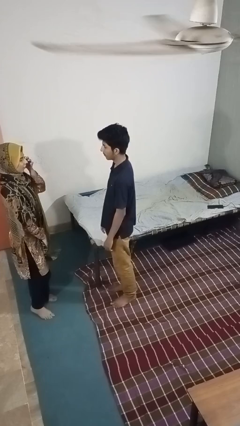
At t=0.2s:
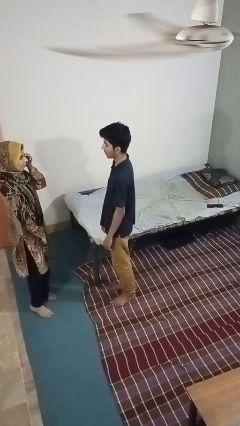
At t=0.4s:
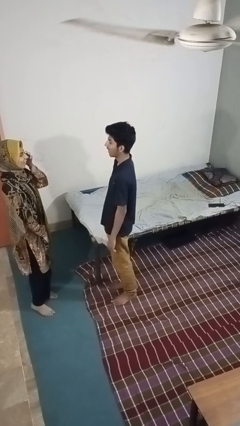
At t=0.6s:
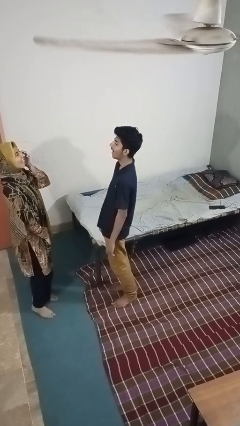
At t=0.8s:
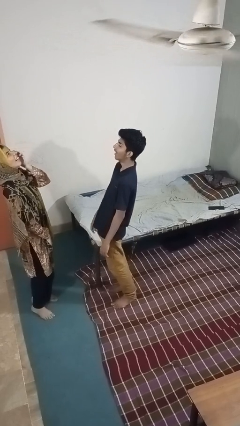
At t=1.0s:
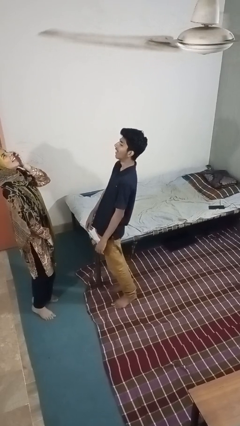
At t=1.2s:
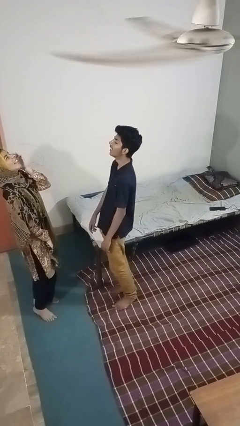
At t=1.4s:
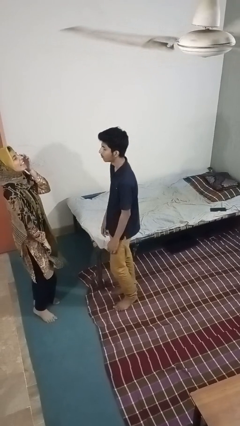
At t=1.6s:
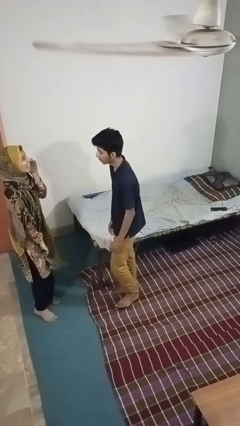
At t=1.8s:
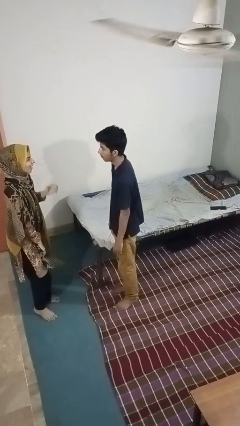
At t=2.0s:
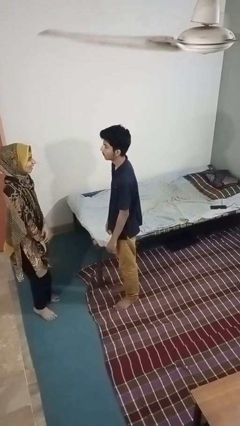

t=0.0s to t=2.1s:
person laughs with person

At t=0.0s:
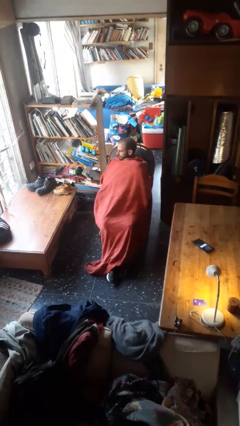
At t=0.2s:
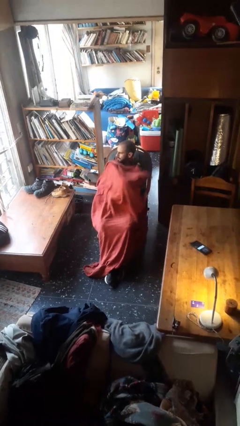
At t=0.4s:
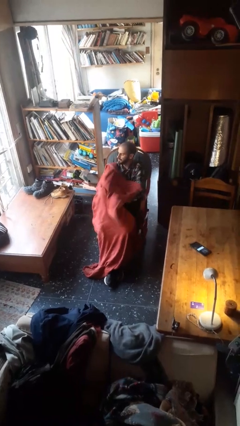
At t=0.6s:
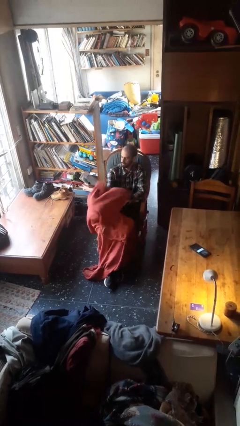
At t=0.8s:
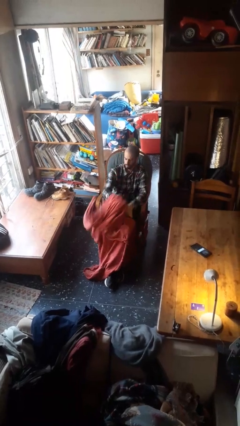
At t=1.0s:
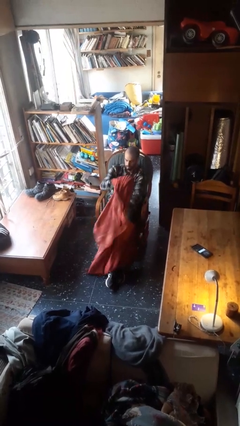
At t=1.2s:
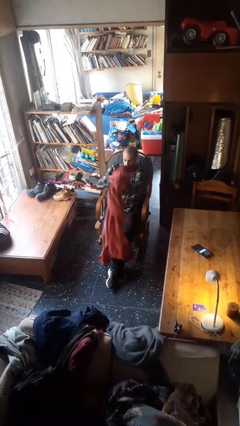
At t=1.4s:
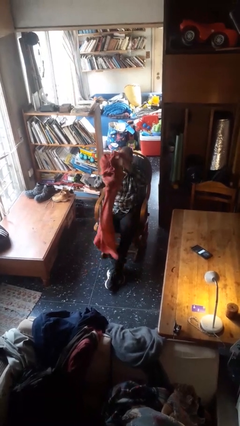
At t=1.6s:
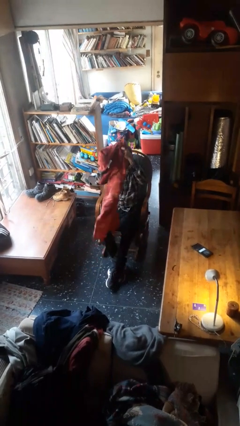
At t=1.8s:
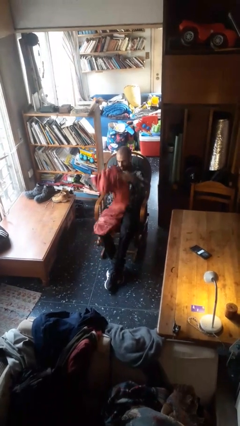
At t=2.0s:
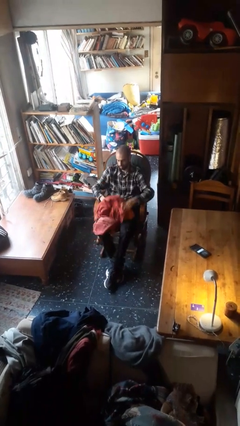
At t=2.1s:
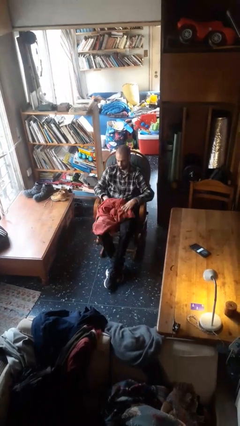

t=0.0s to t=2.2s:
person uncovers with blanket

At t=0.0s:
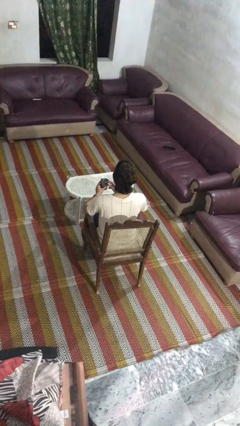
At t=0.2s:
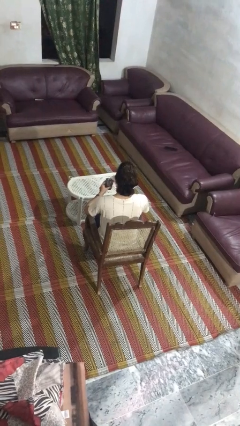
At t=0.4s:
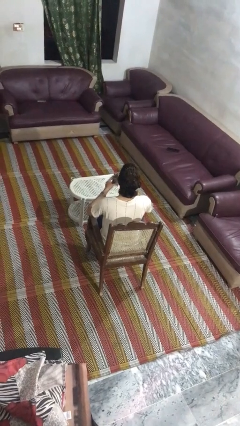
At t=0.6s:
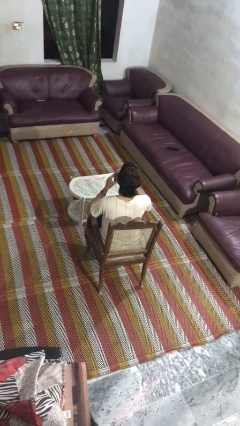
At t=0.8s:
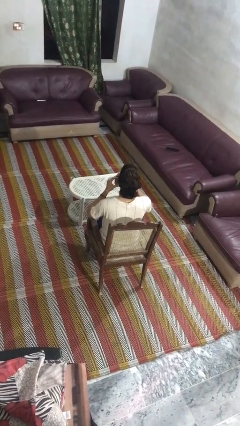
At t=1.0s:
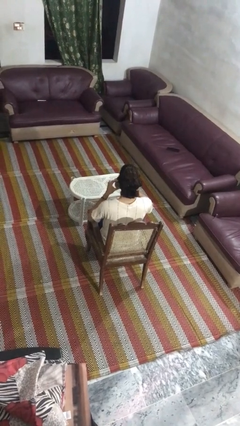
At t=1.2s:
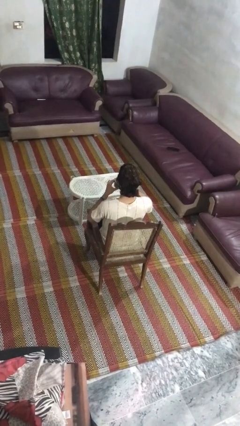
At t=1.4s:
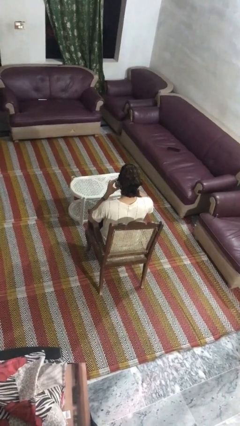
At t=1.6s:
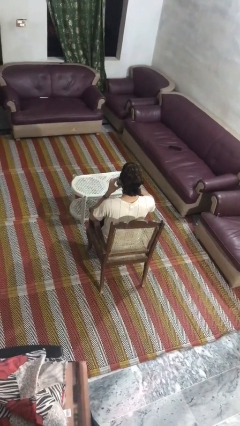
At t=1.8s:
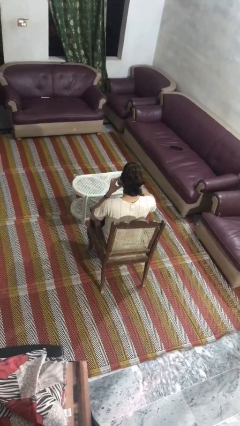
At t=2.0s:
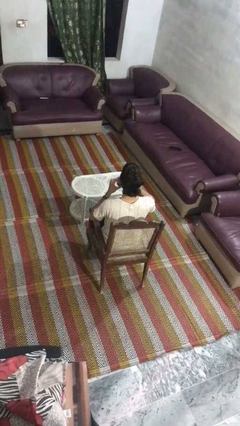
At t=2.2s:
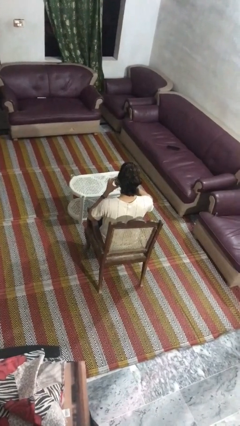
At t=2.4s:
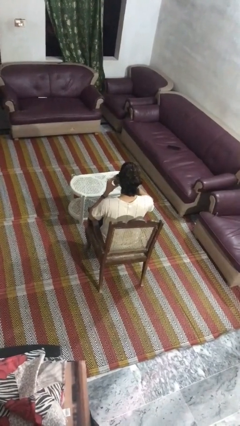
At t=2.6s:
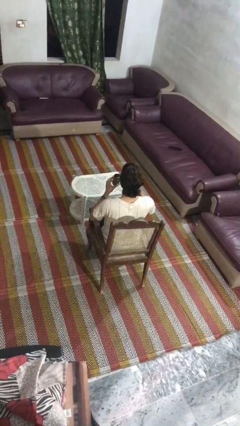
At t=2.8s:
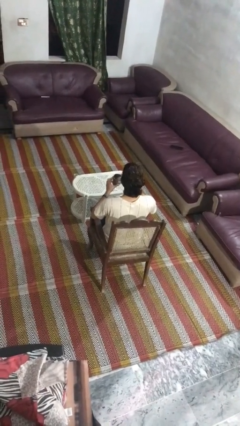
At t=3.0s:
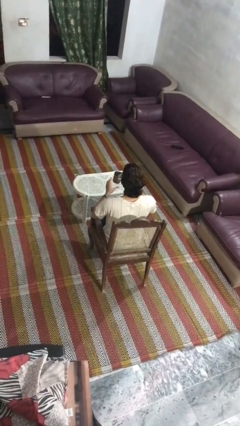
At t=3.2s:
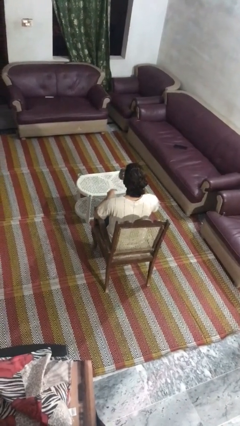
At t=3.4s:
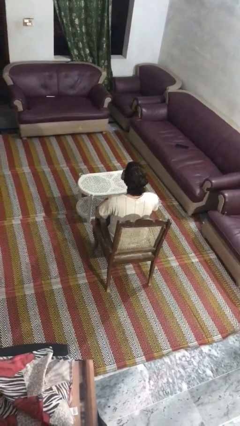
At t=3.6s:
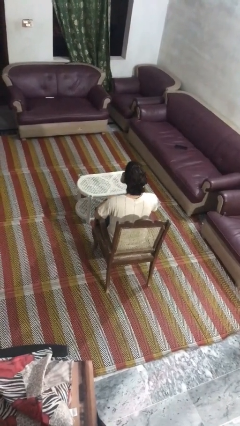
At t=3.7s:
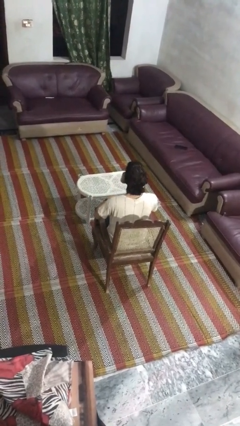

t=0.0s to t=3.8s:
person drinks from straw

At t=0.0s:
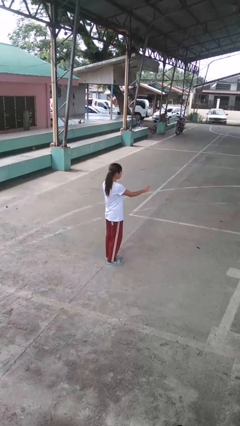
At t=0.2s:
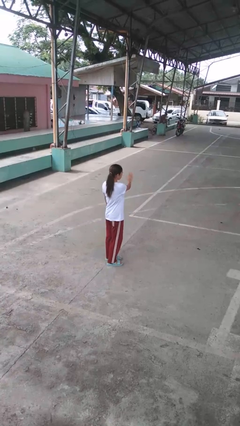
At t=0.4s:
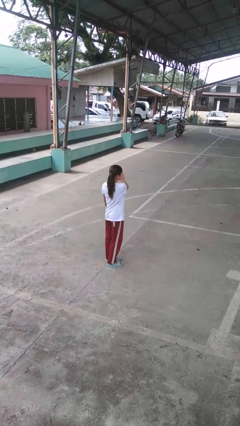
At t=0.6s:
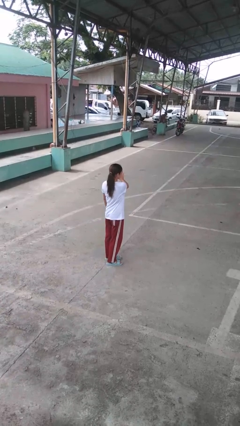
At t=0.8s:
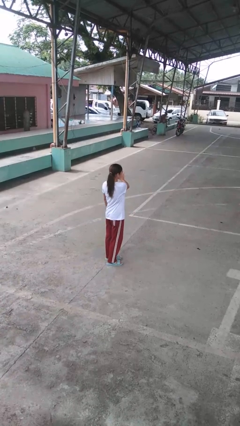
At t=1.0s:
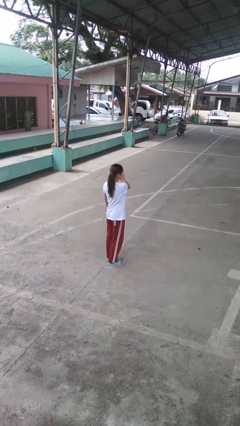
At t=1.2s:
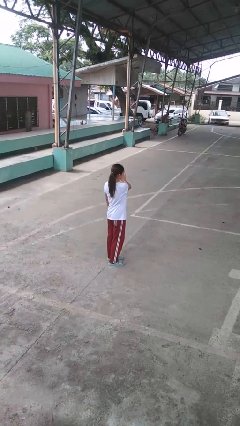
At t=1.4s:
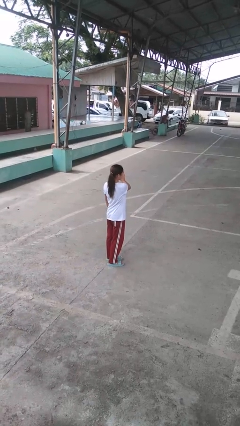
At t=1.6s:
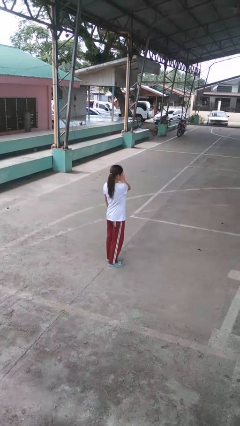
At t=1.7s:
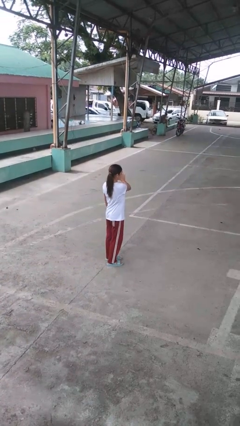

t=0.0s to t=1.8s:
person gestures swipe left

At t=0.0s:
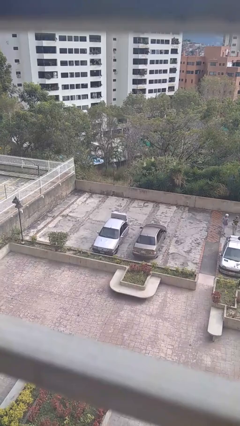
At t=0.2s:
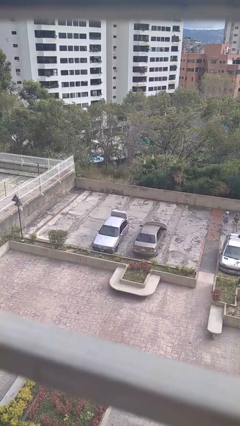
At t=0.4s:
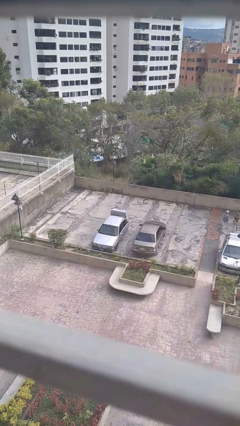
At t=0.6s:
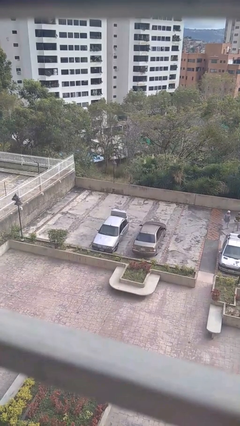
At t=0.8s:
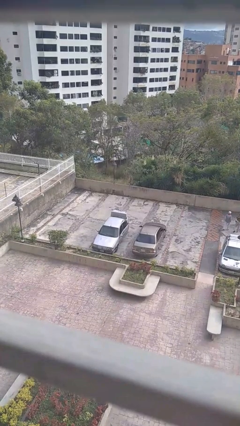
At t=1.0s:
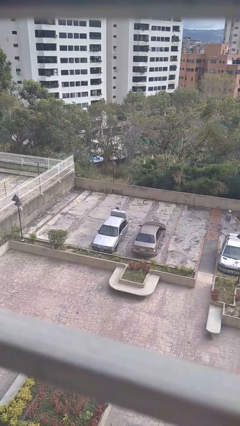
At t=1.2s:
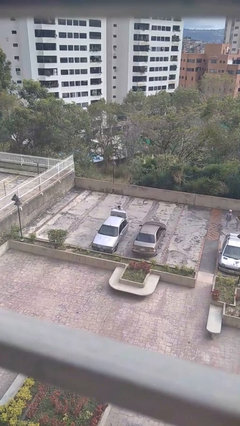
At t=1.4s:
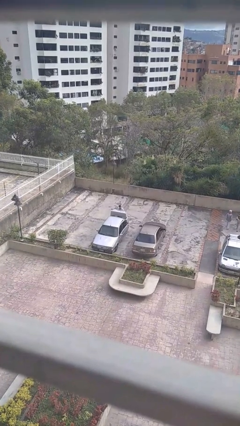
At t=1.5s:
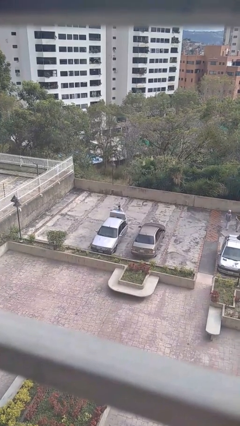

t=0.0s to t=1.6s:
person unloads car

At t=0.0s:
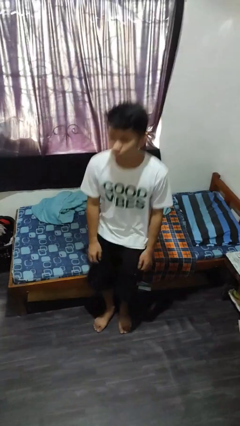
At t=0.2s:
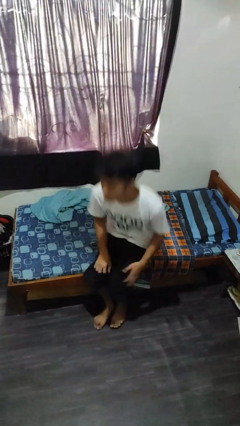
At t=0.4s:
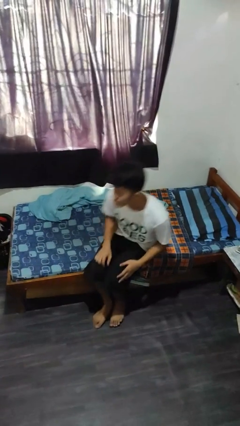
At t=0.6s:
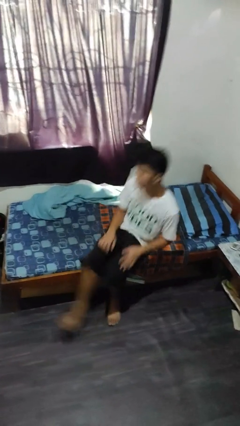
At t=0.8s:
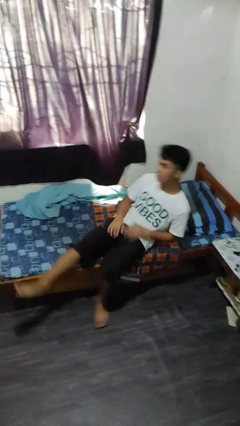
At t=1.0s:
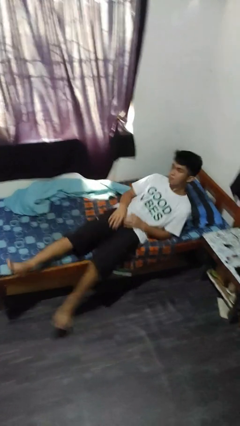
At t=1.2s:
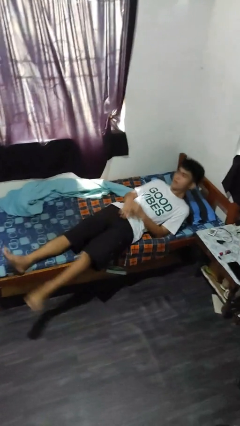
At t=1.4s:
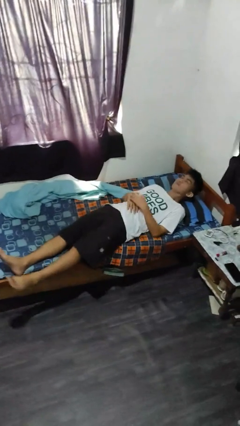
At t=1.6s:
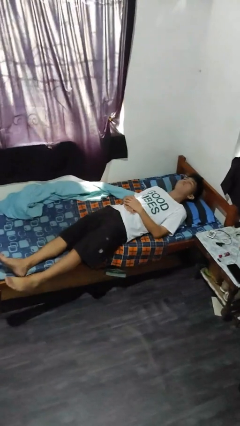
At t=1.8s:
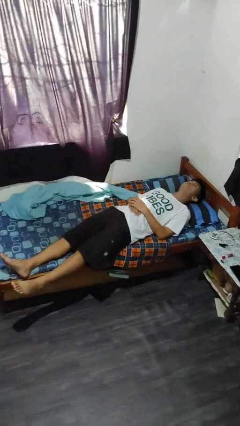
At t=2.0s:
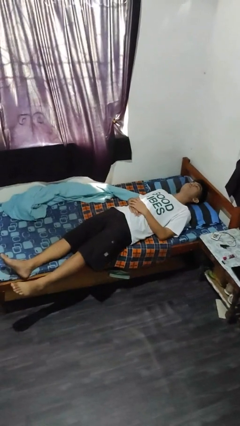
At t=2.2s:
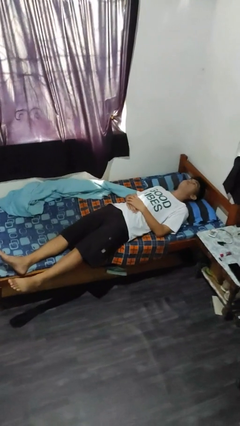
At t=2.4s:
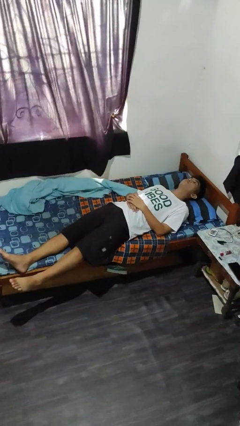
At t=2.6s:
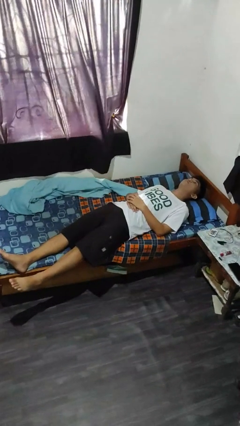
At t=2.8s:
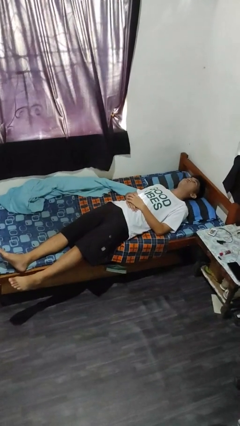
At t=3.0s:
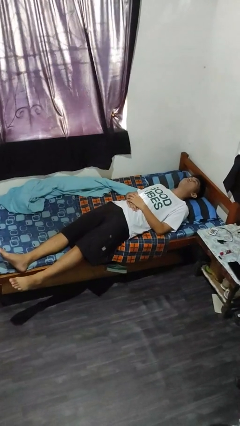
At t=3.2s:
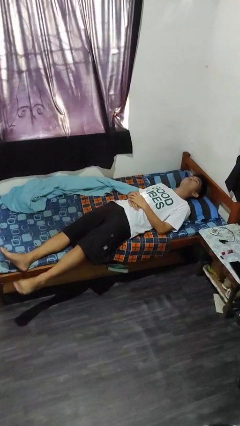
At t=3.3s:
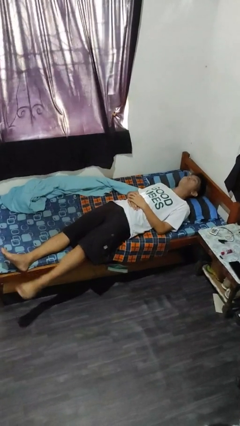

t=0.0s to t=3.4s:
person lies down on bed

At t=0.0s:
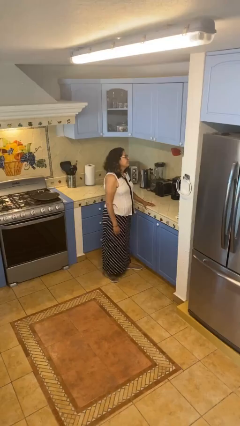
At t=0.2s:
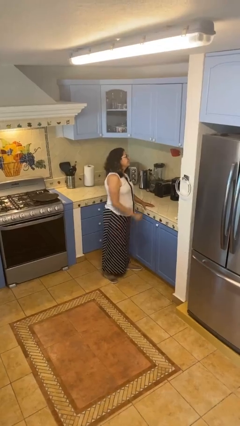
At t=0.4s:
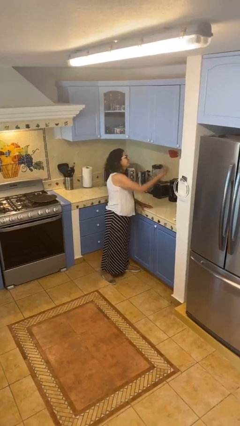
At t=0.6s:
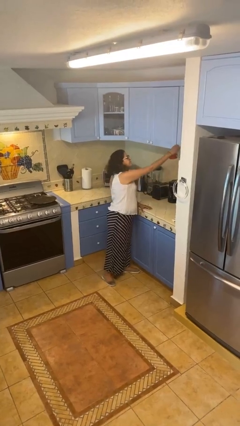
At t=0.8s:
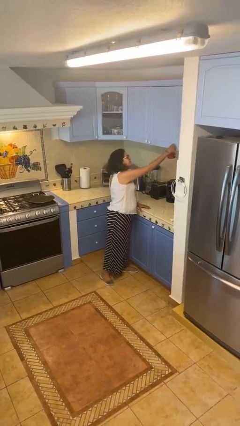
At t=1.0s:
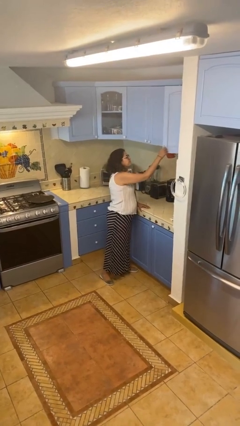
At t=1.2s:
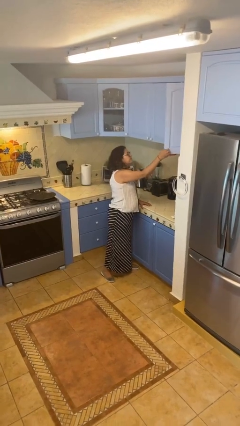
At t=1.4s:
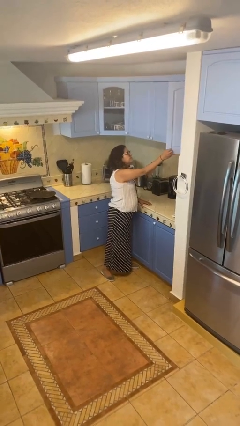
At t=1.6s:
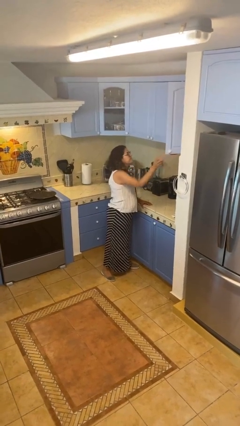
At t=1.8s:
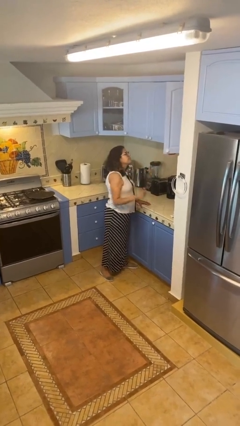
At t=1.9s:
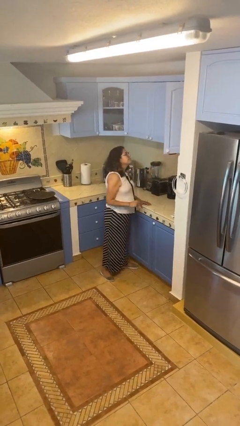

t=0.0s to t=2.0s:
person opens cabinet
